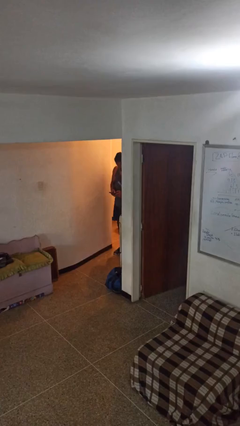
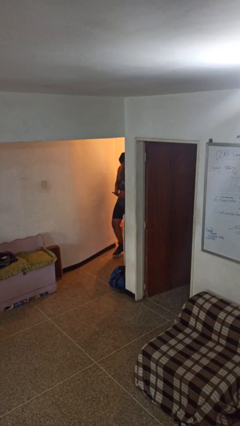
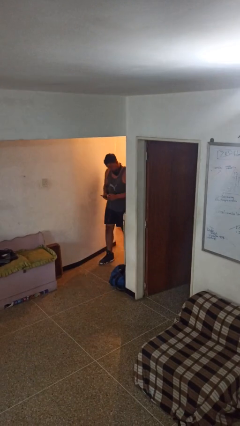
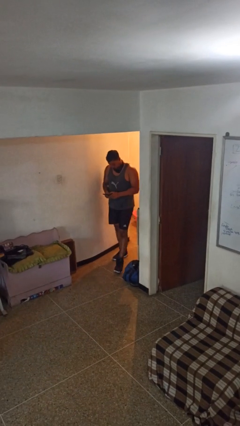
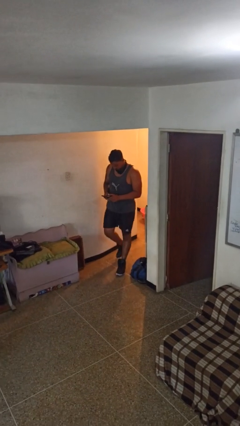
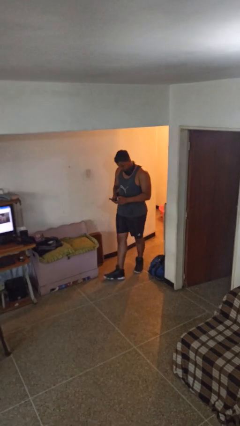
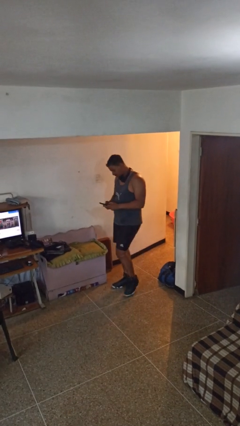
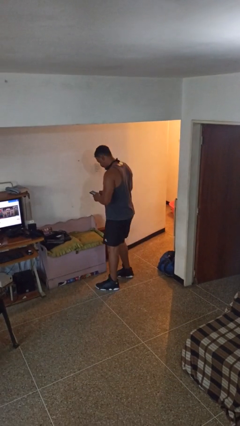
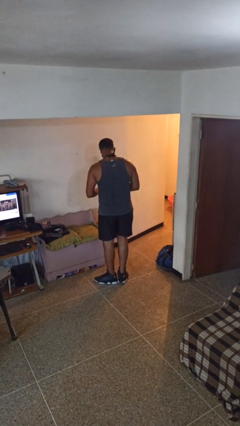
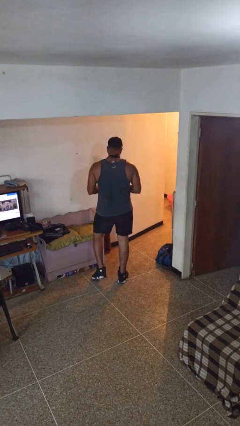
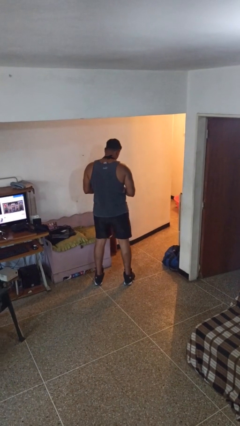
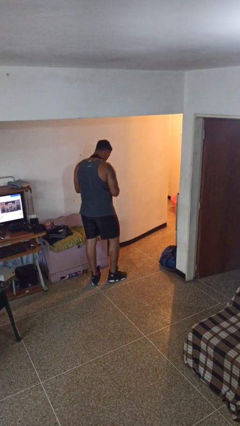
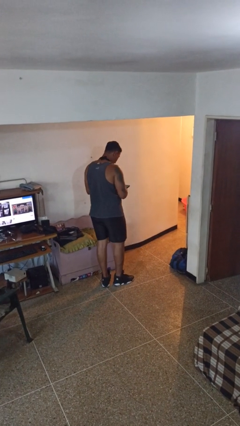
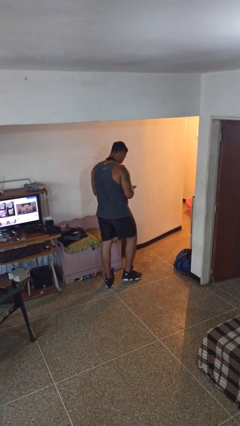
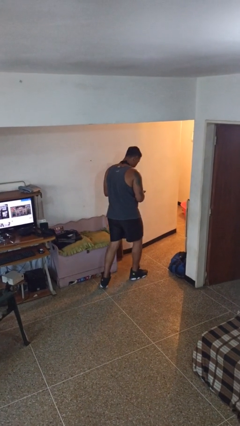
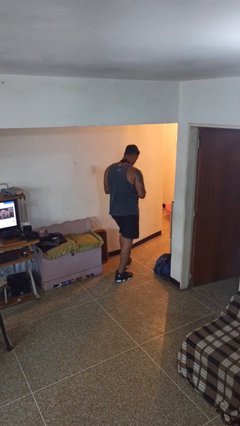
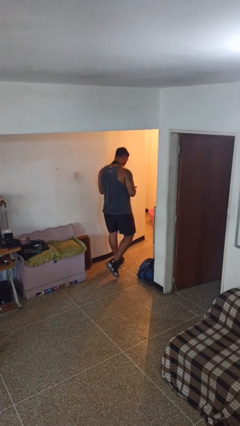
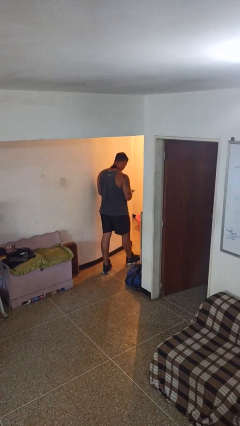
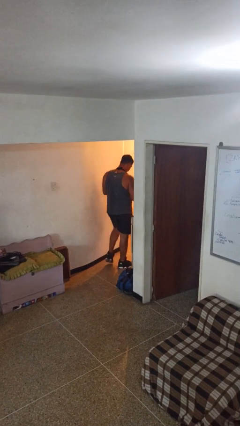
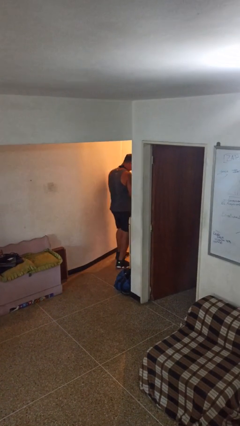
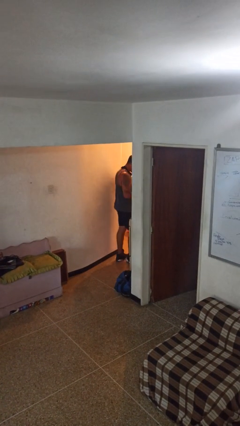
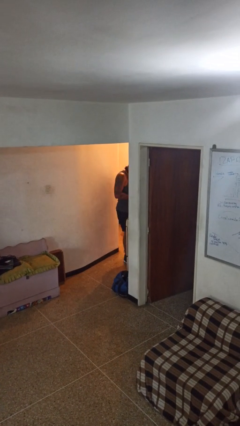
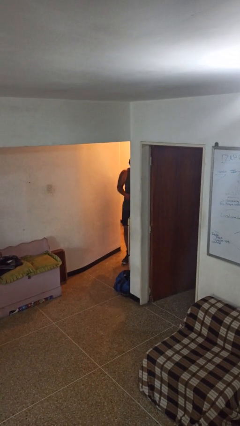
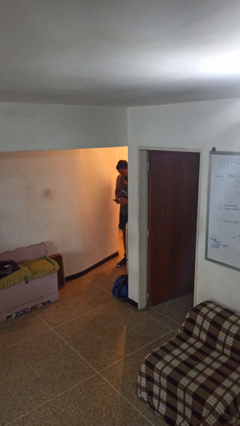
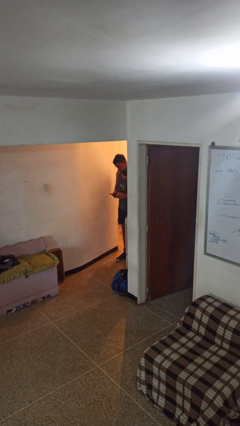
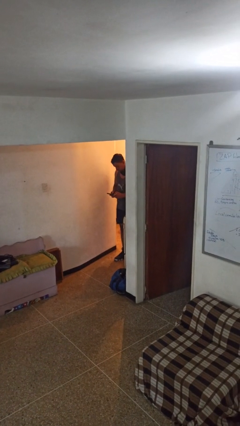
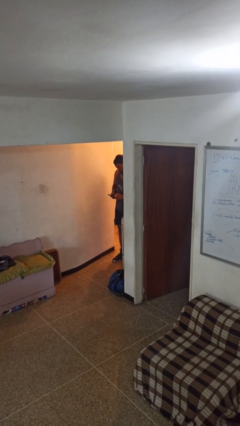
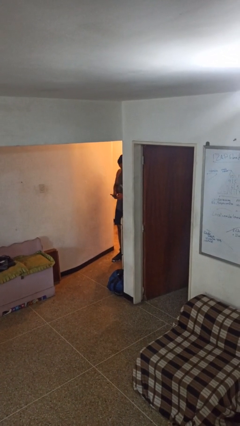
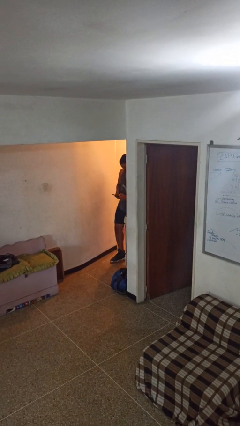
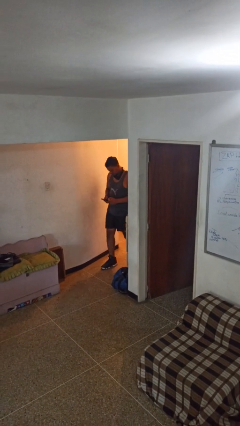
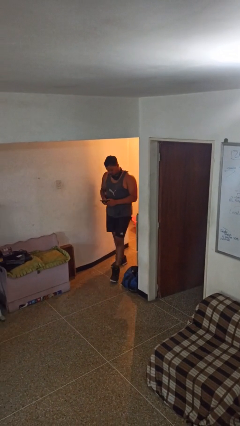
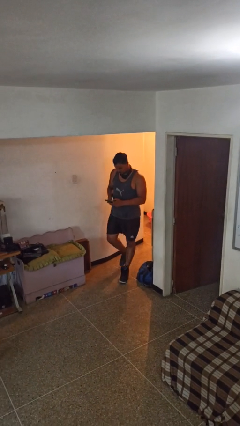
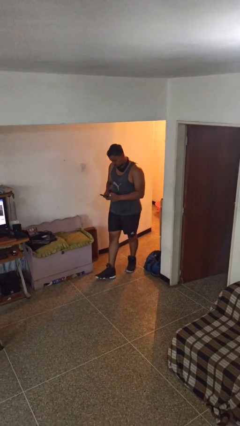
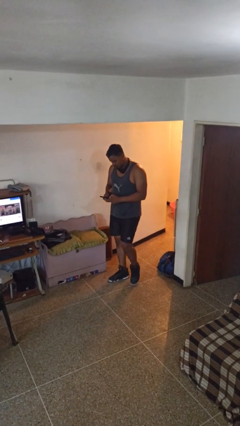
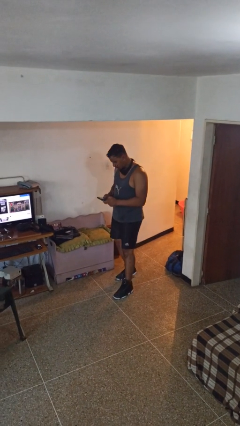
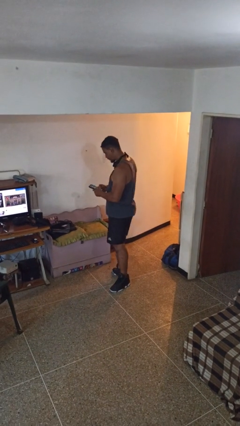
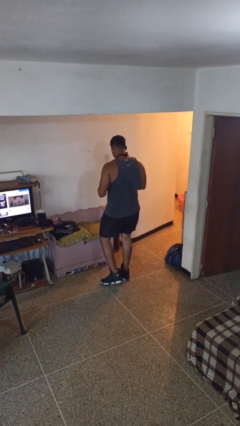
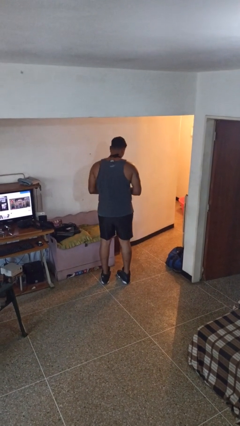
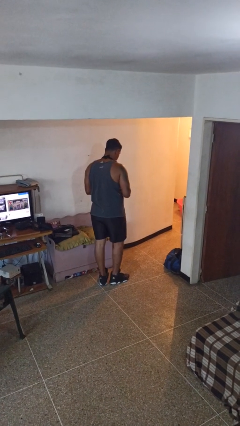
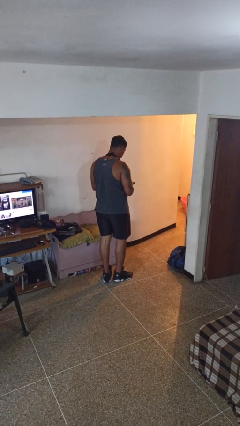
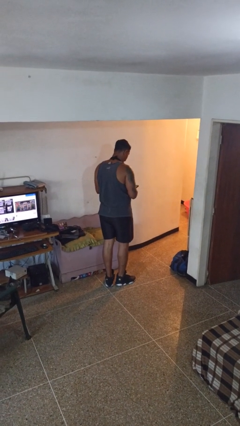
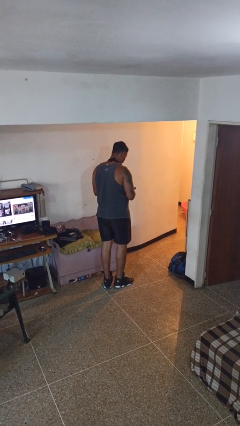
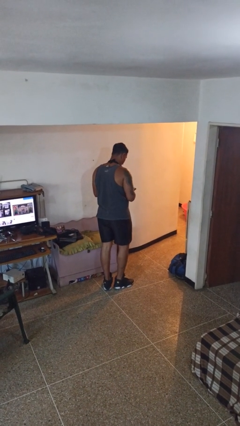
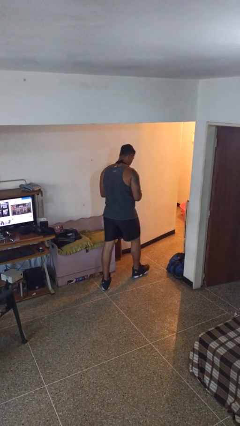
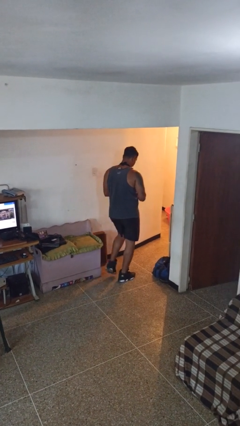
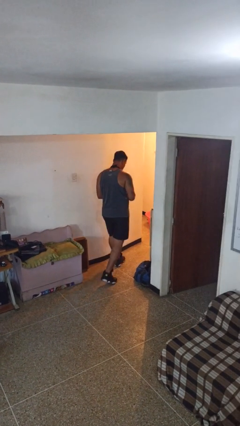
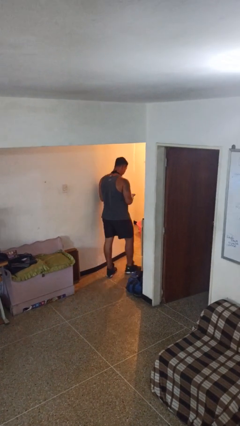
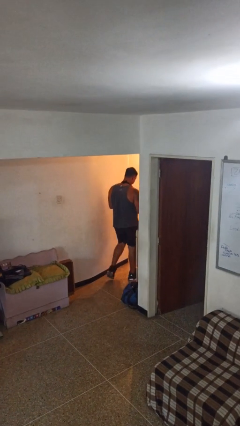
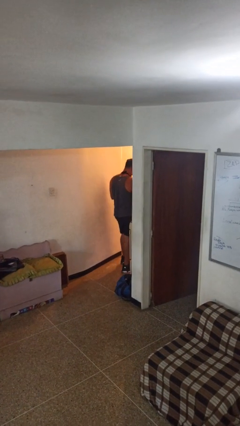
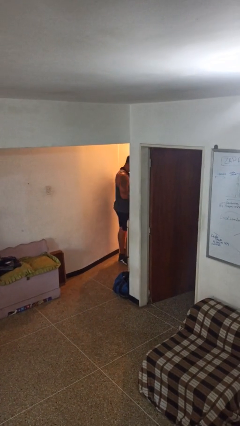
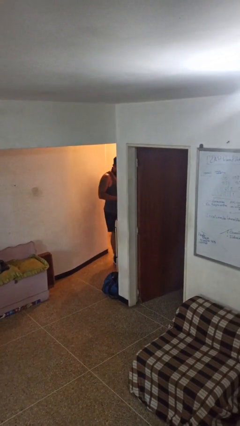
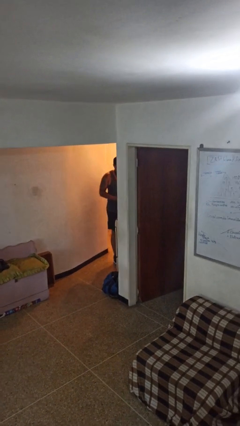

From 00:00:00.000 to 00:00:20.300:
person texts on phone

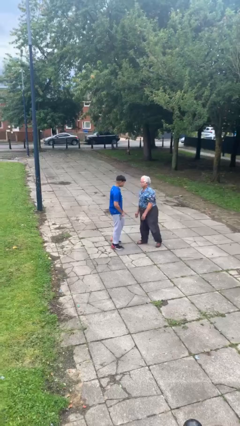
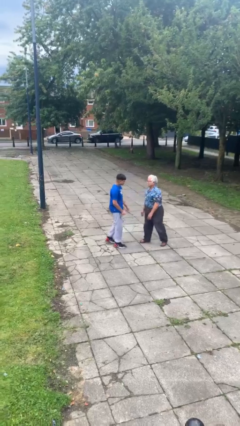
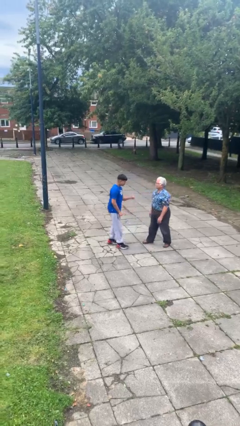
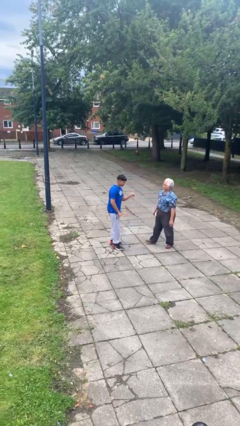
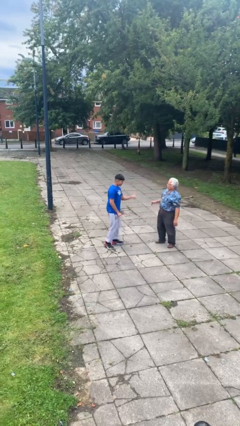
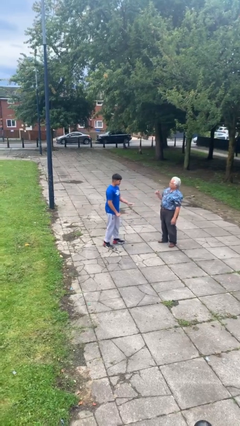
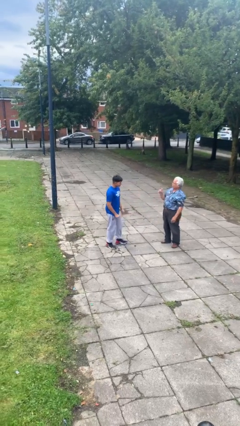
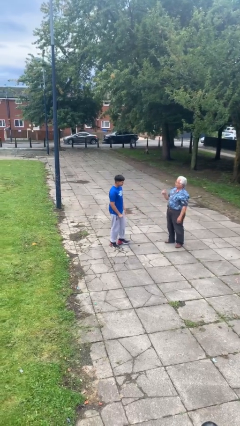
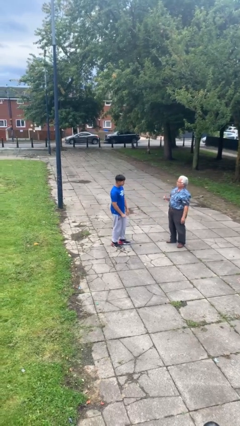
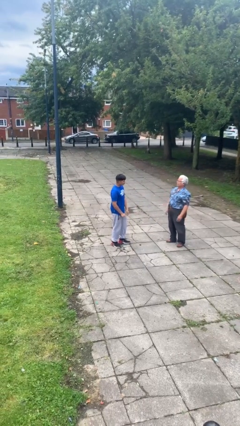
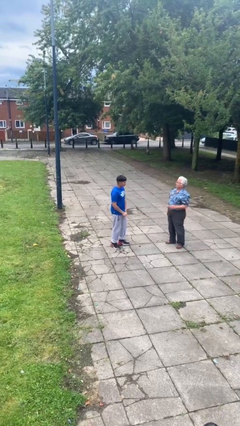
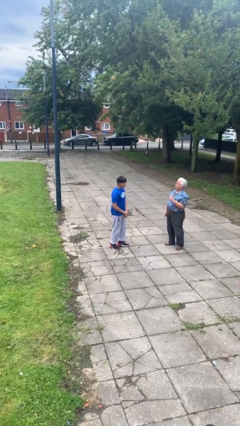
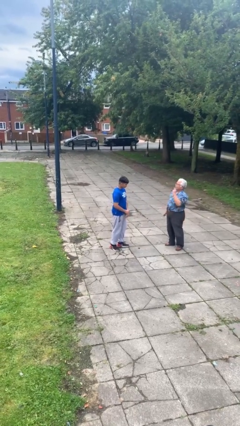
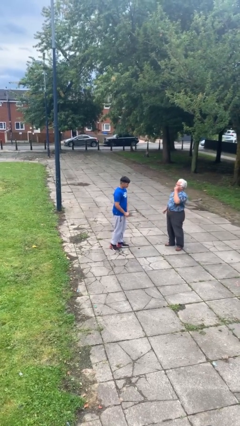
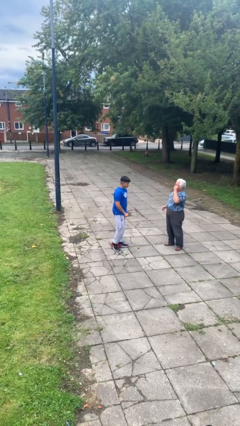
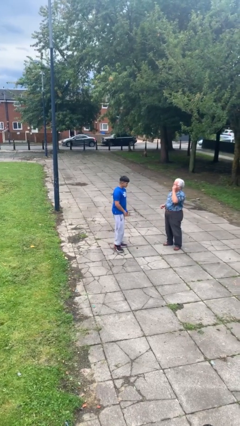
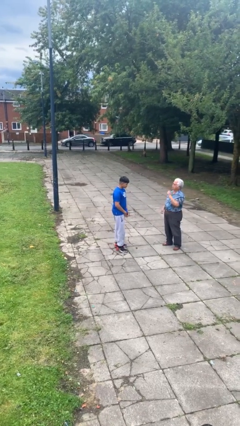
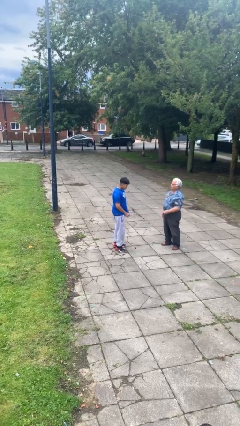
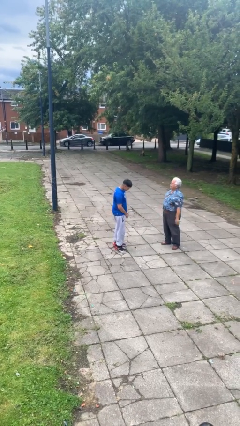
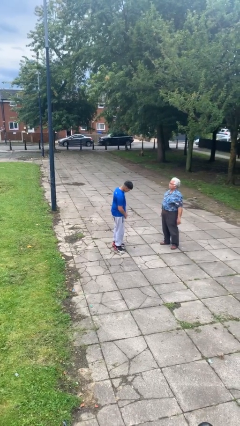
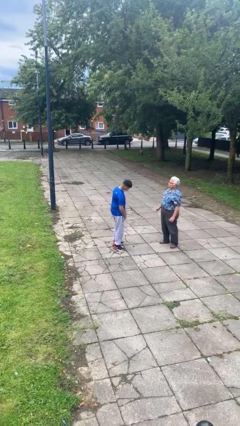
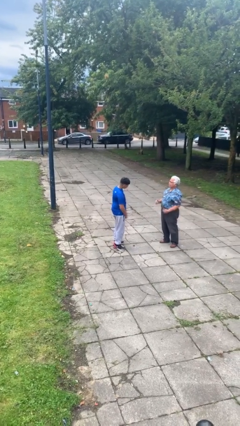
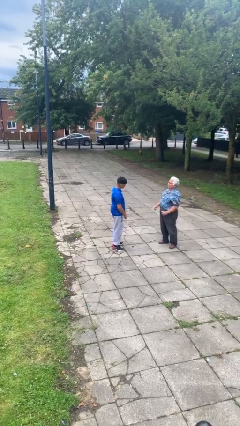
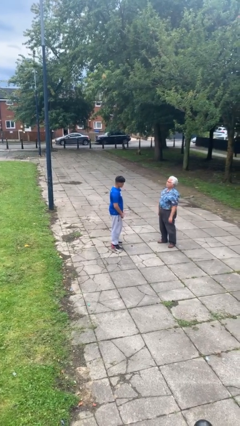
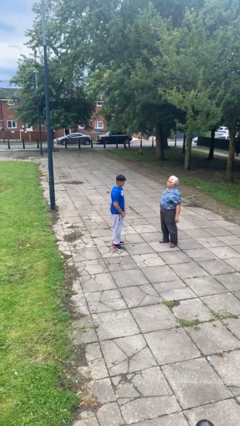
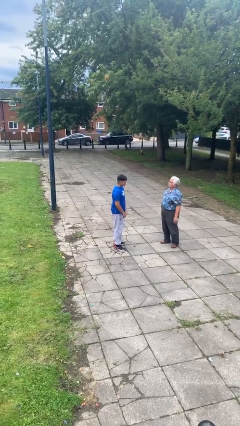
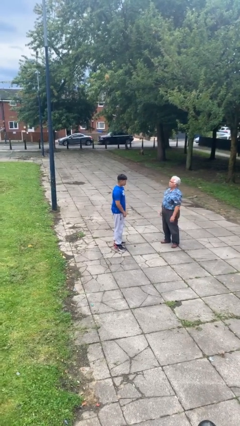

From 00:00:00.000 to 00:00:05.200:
person talks to person

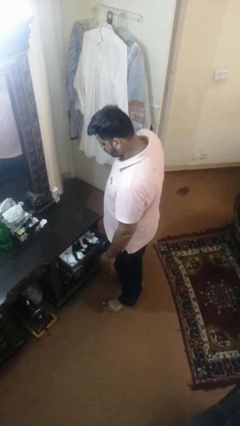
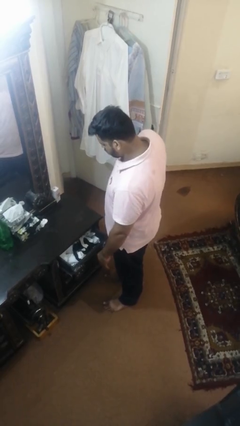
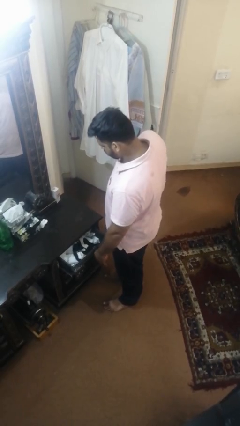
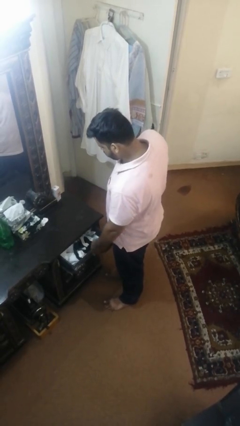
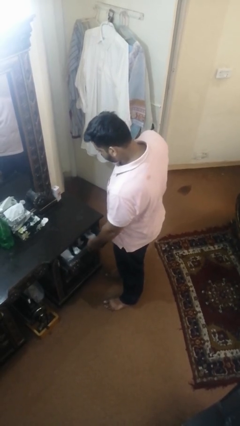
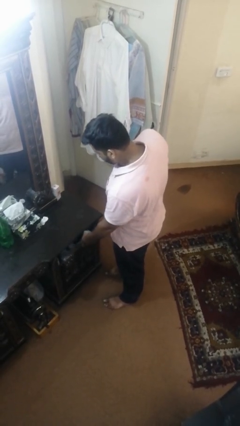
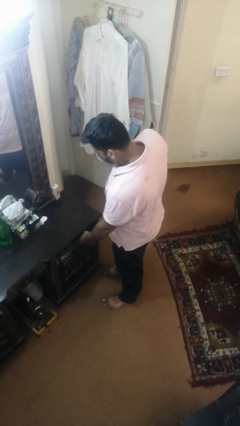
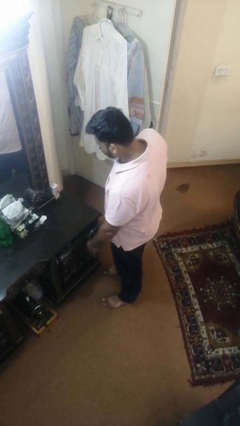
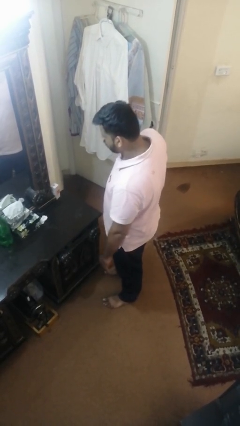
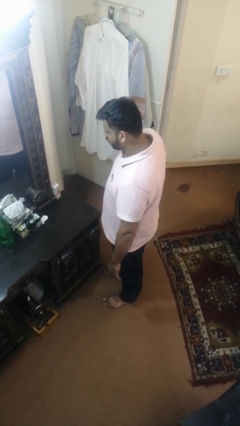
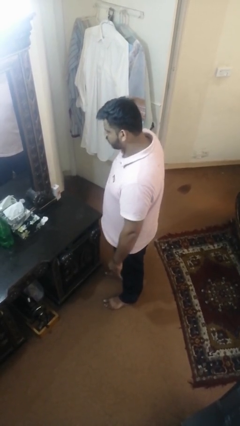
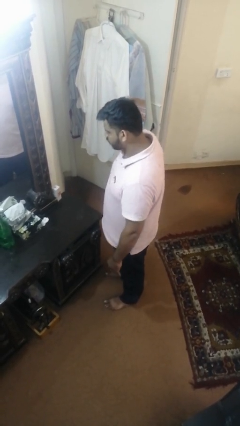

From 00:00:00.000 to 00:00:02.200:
person closes dresser drawer

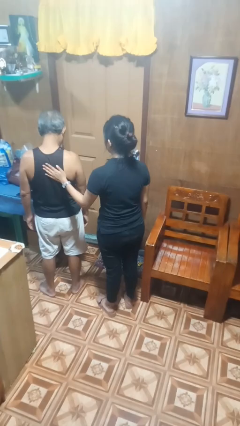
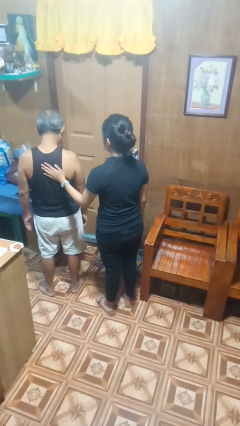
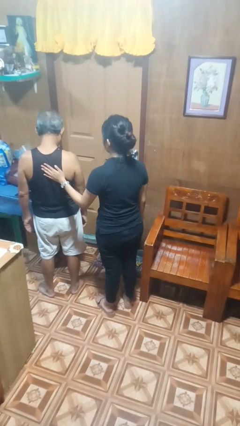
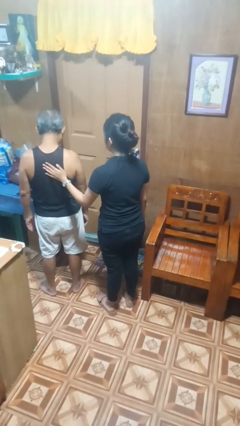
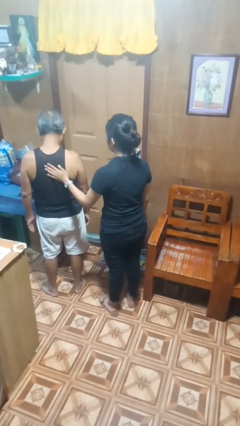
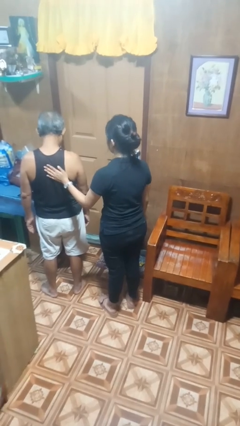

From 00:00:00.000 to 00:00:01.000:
person touches back of person
